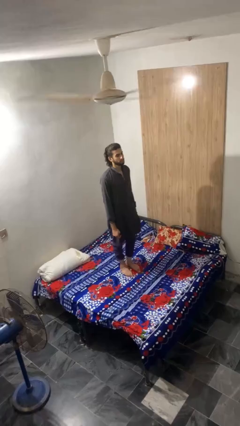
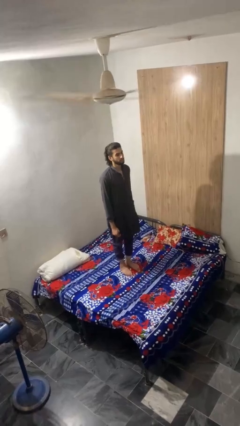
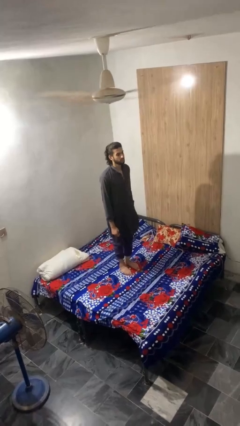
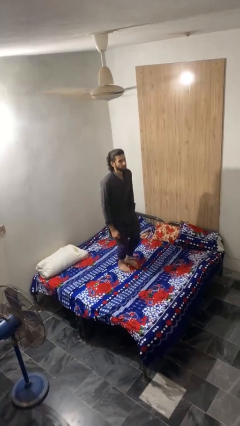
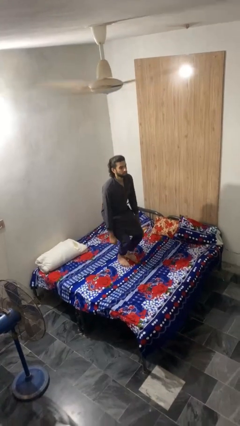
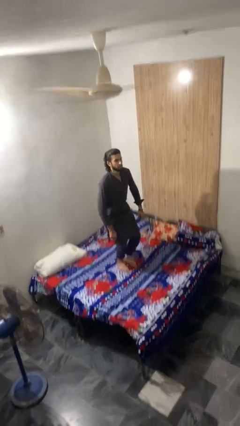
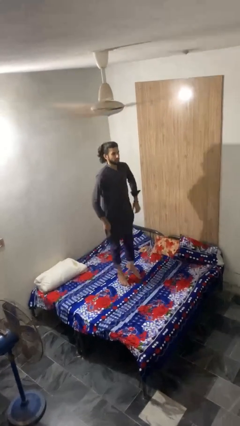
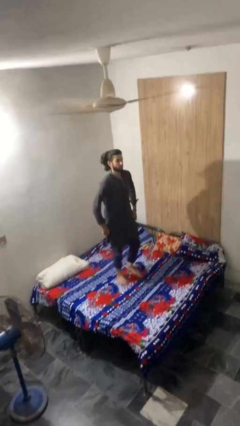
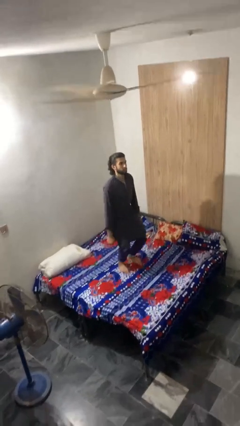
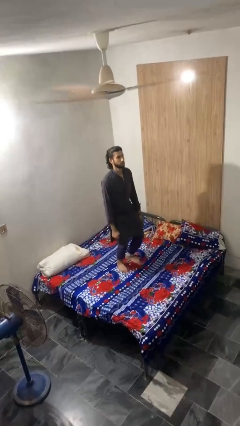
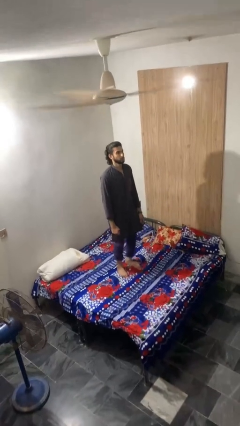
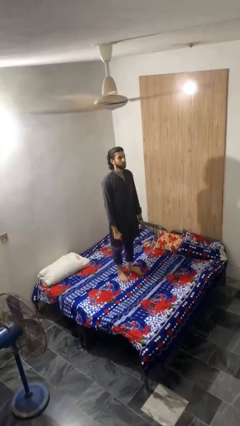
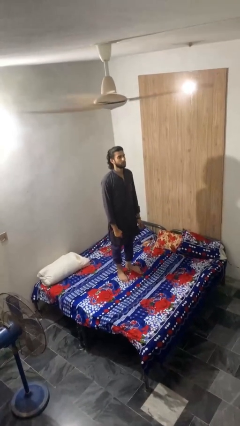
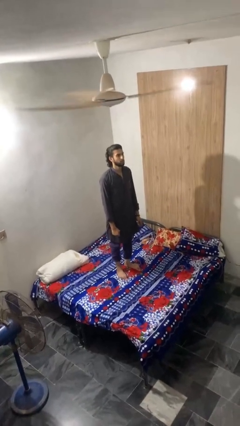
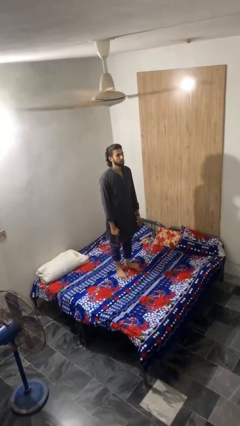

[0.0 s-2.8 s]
person jumps on bed

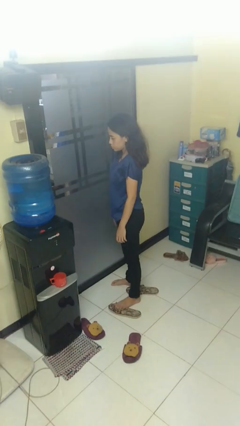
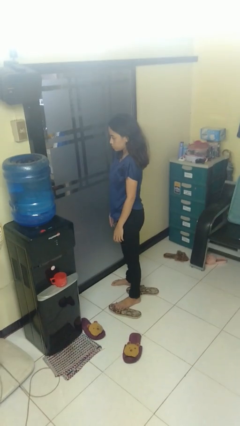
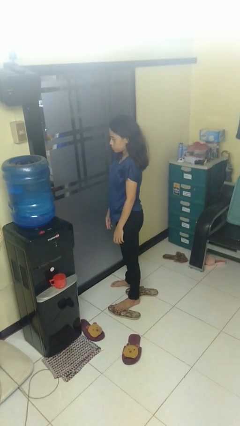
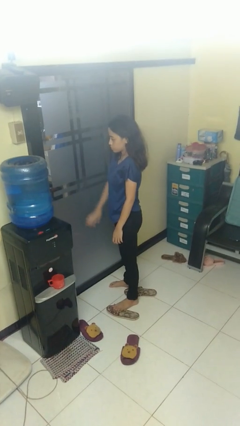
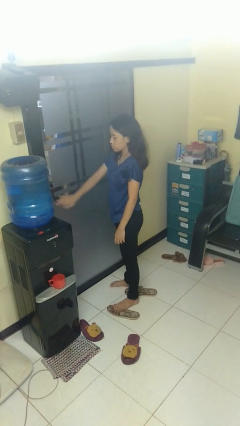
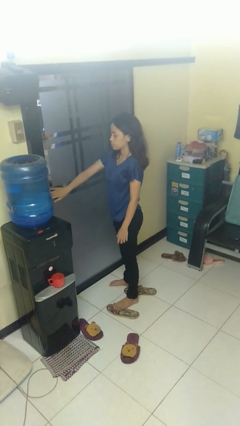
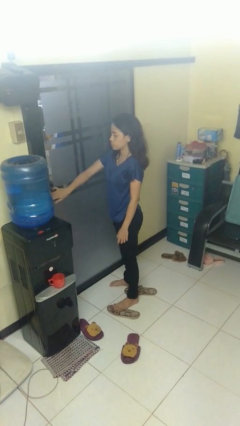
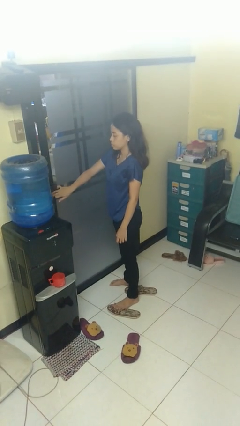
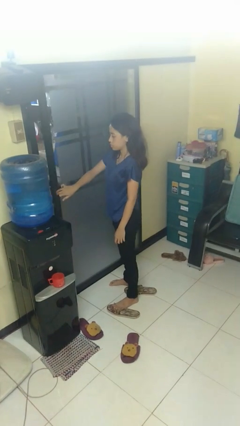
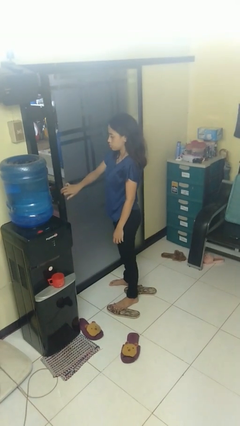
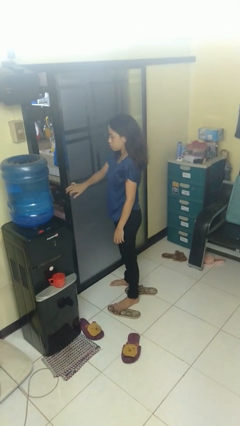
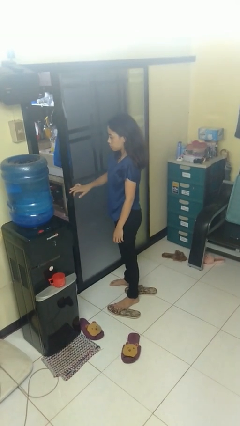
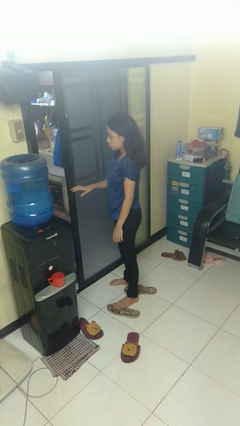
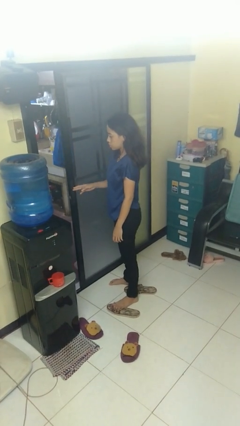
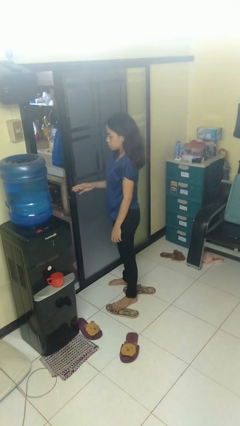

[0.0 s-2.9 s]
person opens sliding door

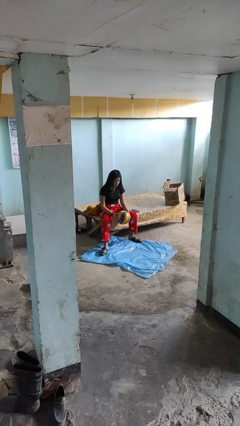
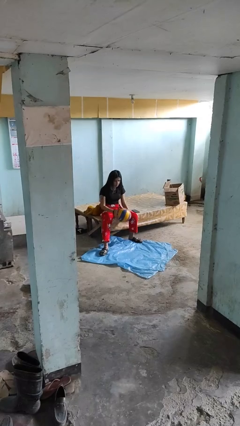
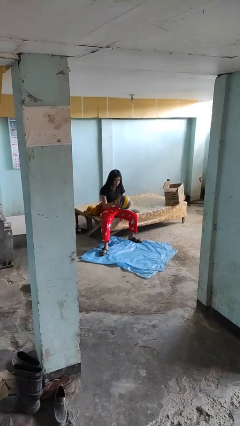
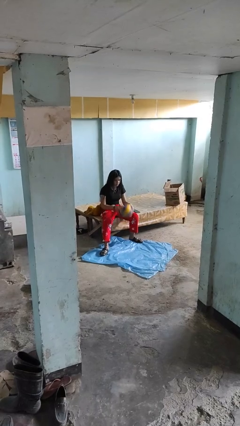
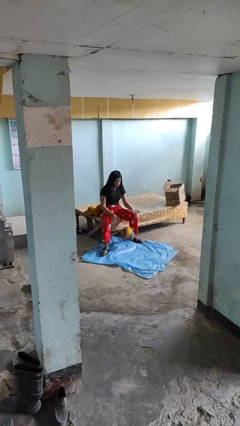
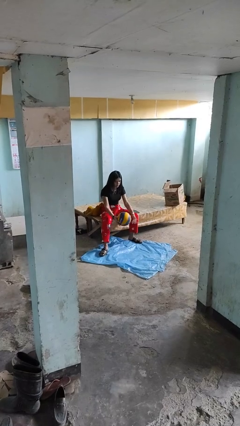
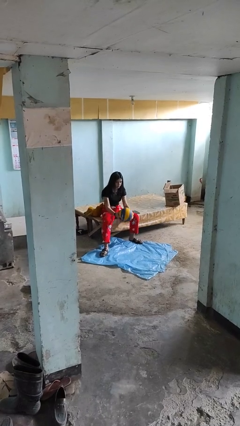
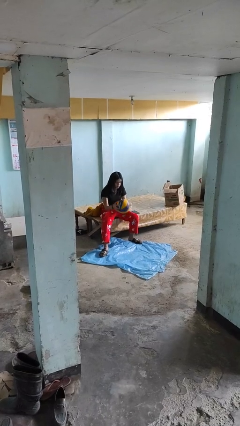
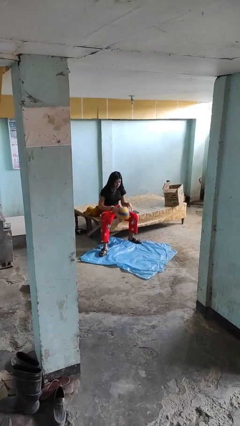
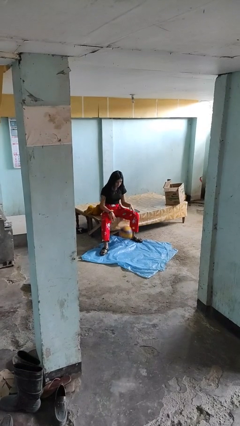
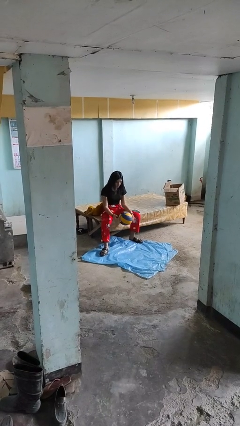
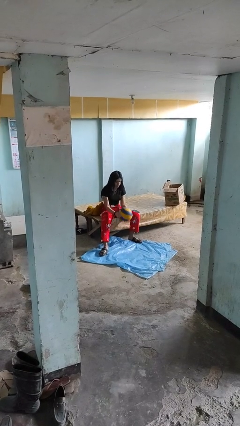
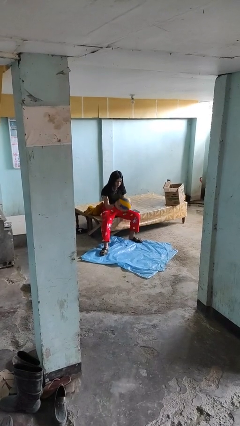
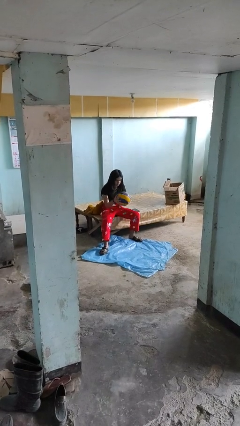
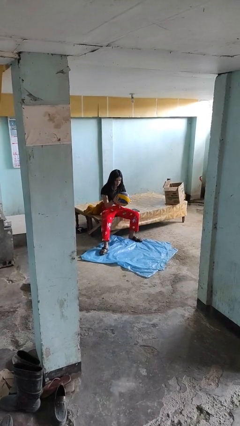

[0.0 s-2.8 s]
person bounces ball on floor

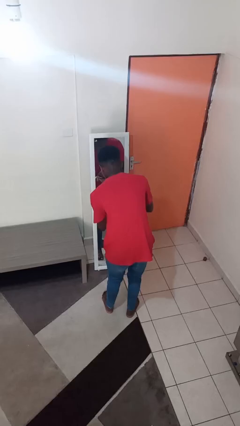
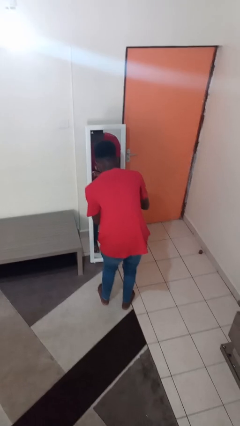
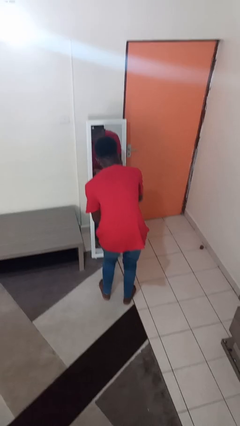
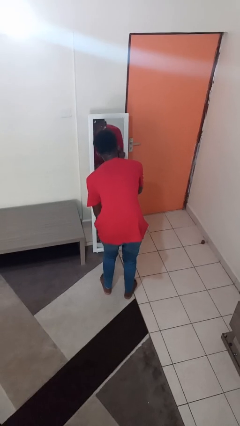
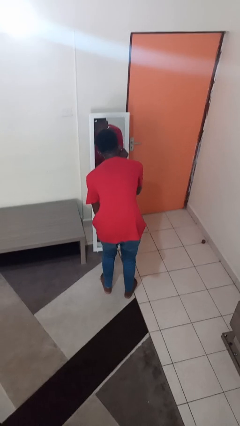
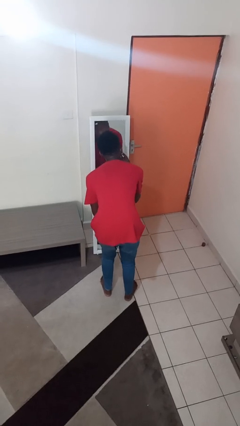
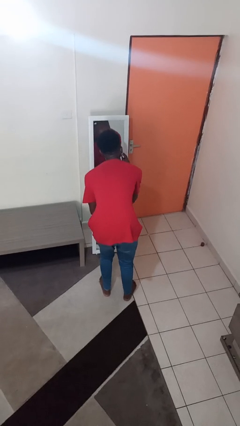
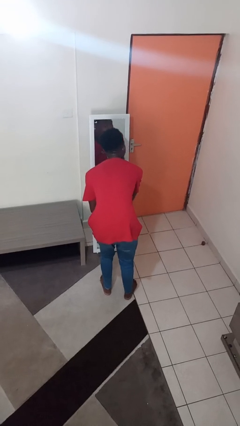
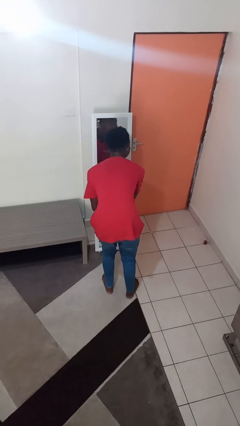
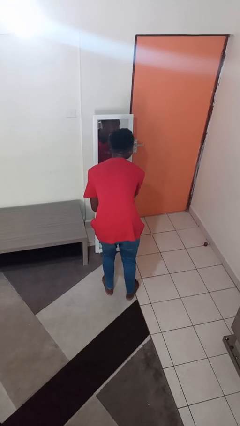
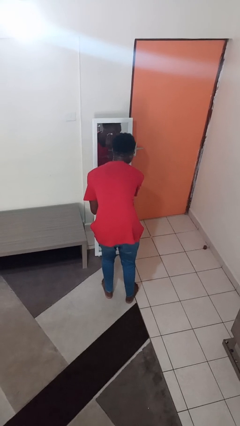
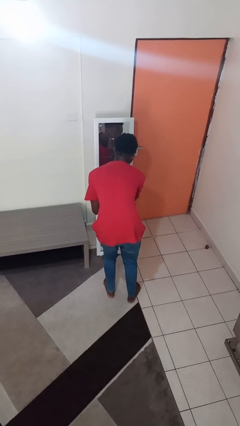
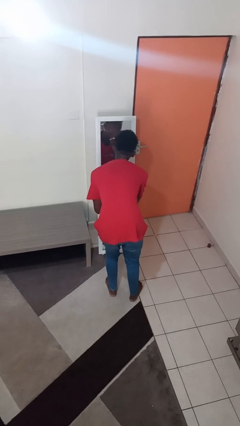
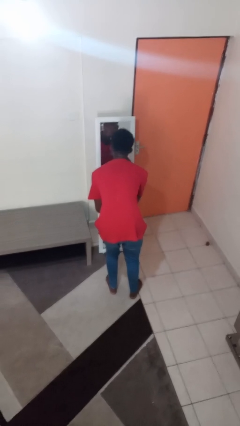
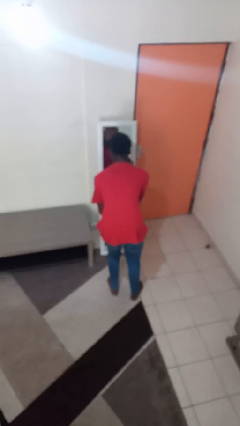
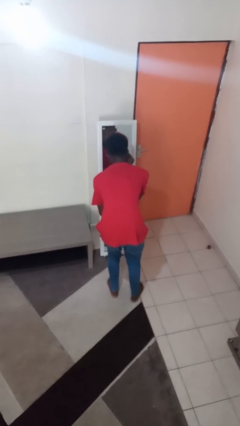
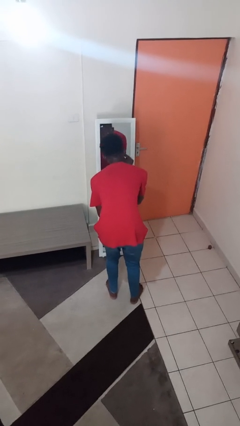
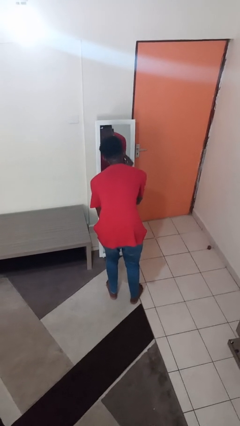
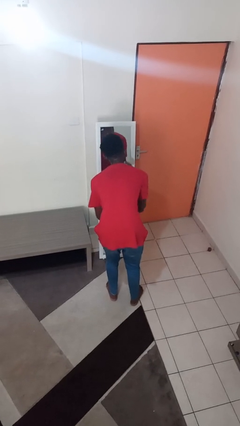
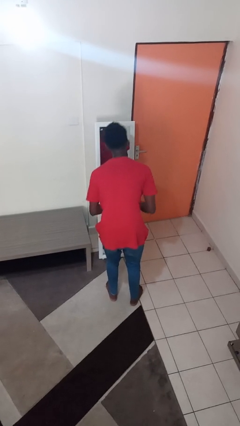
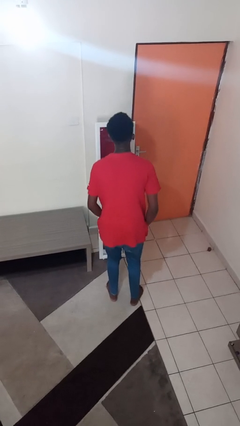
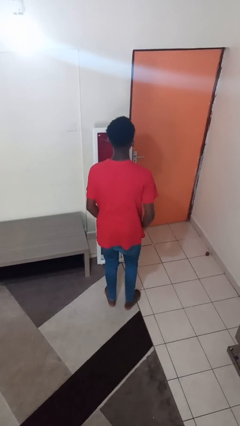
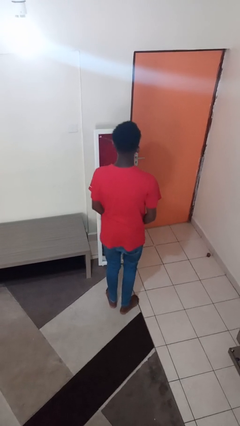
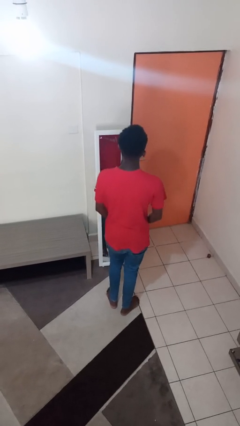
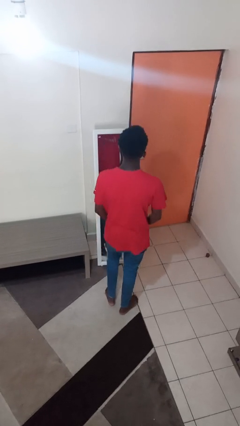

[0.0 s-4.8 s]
person applies foundation makeup

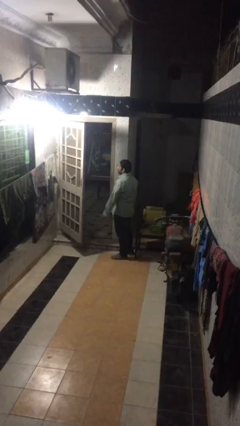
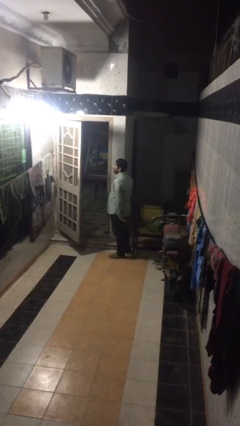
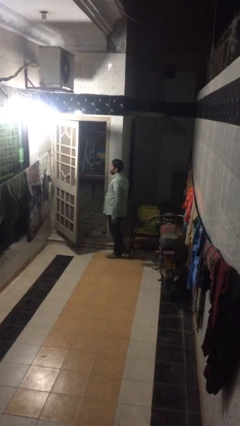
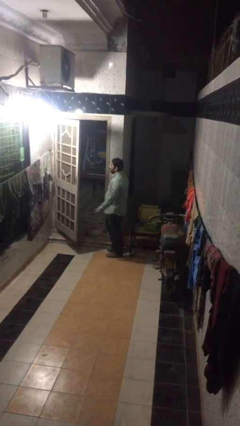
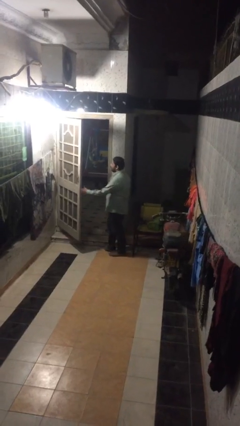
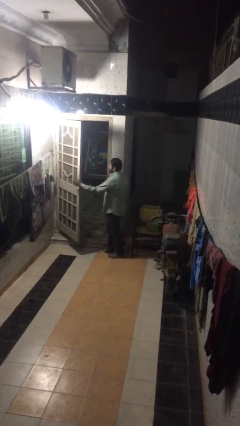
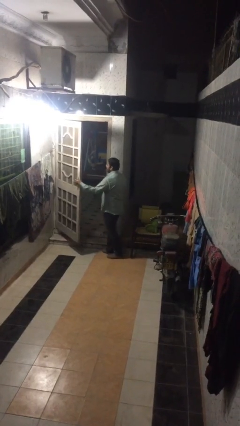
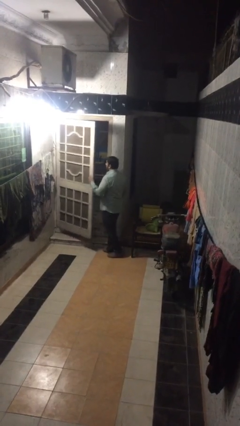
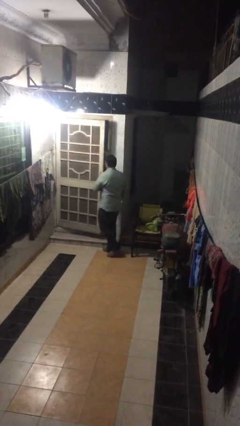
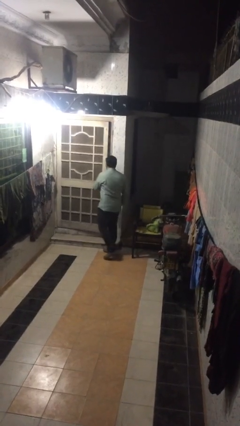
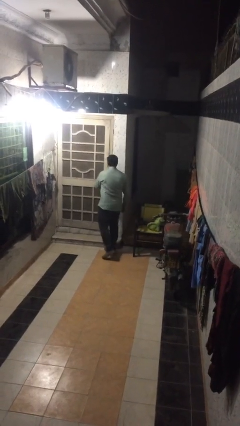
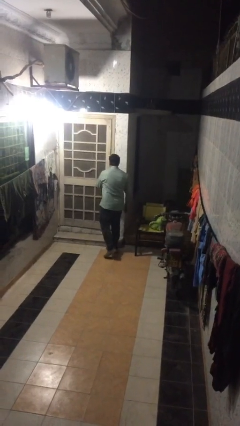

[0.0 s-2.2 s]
person closes facility door

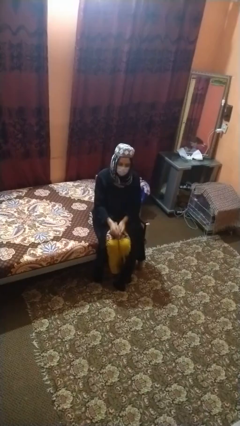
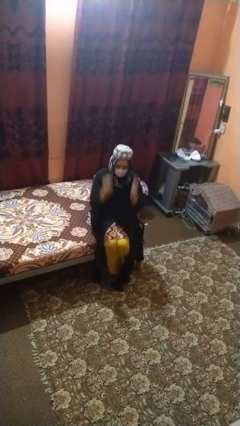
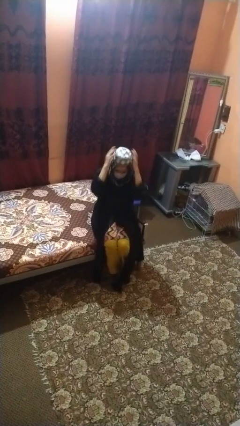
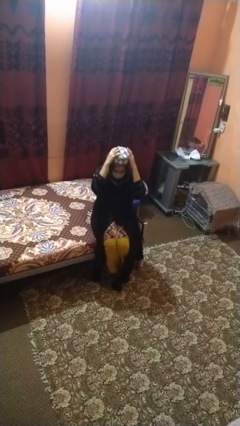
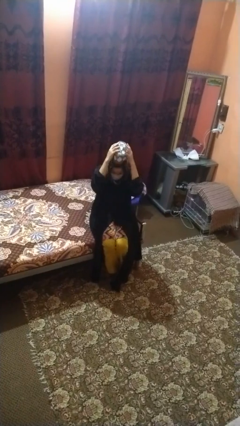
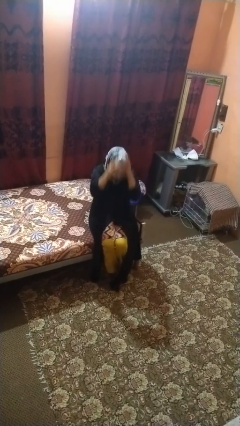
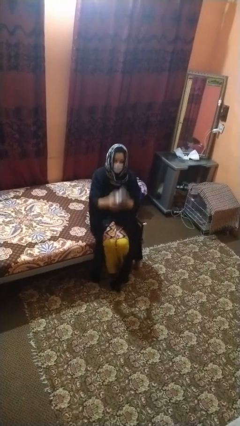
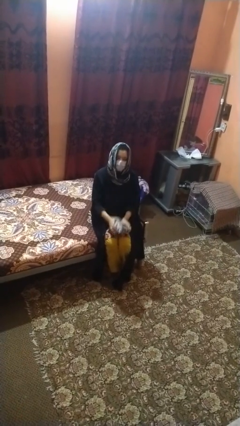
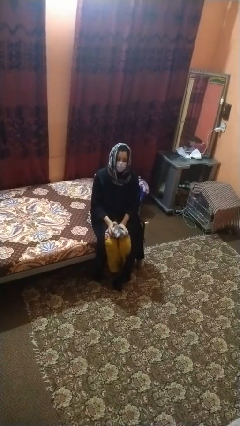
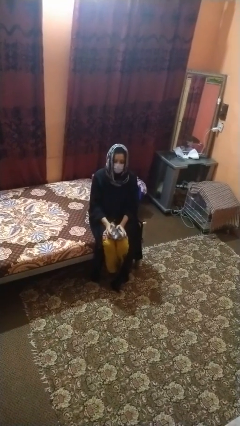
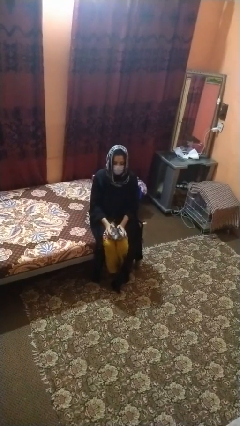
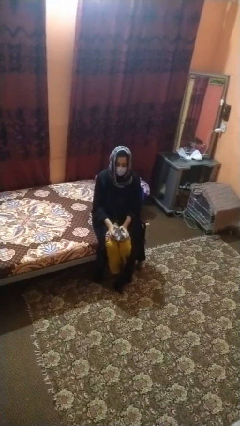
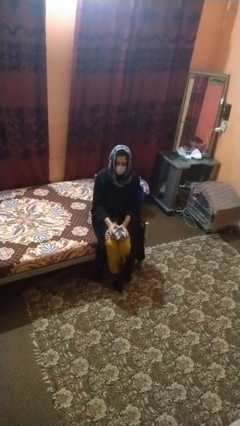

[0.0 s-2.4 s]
person takes off hat
